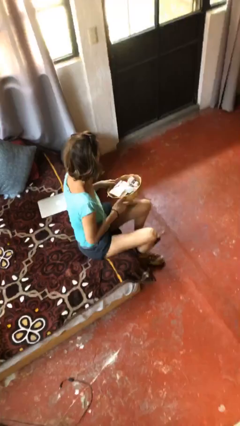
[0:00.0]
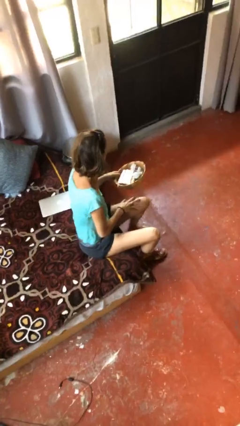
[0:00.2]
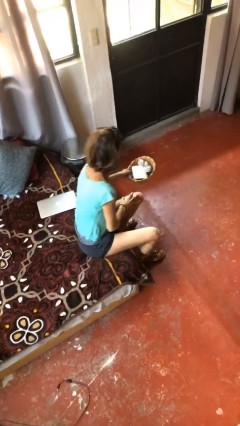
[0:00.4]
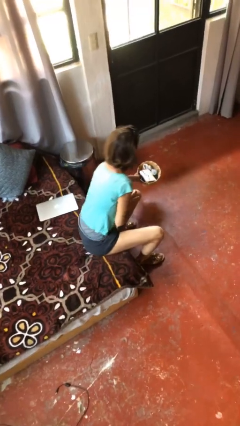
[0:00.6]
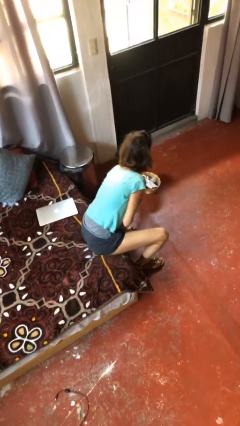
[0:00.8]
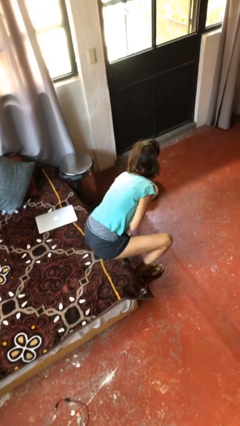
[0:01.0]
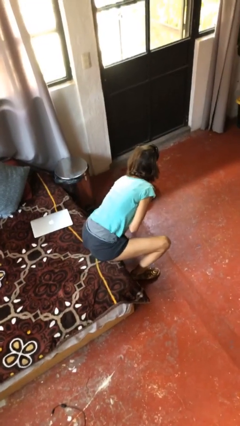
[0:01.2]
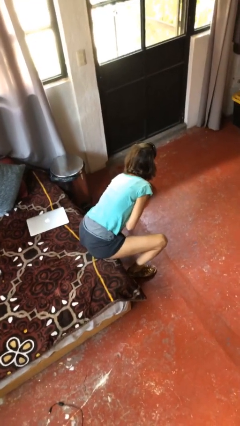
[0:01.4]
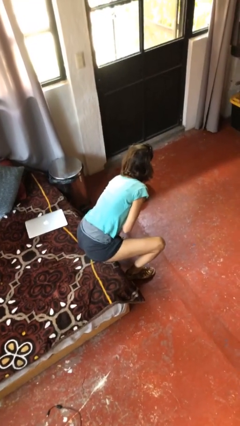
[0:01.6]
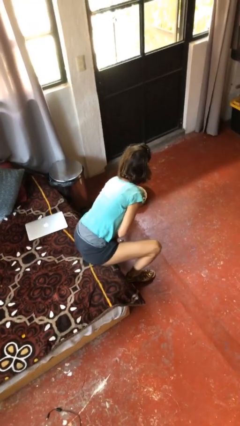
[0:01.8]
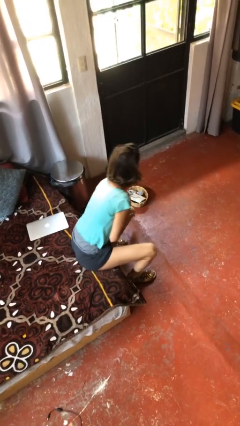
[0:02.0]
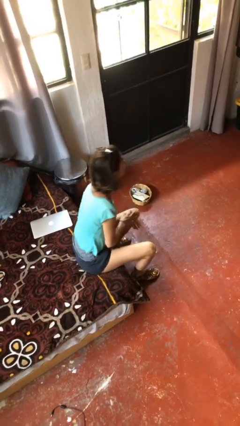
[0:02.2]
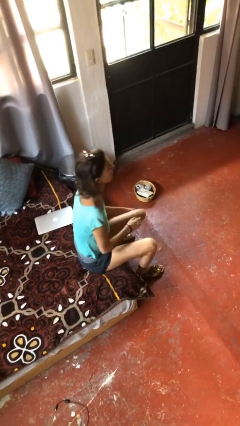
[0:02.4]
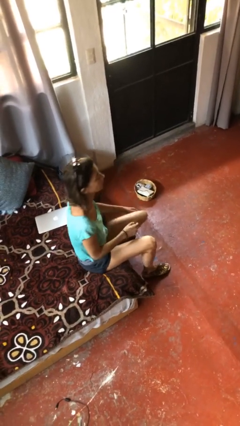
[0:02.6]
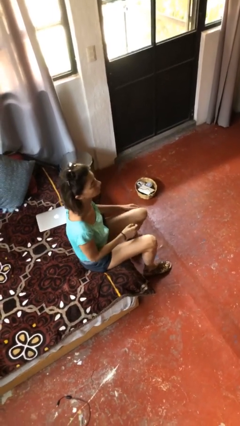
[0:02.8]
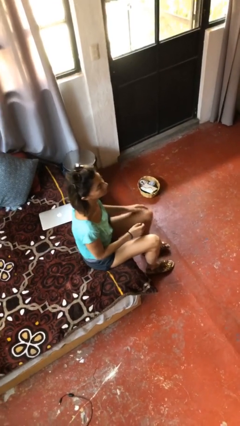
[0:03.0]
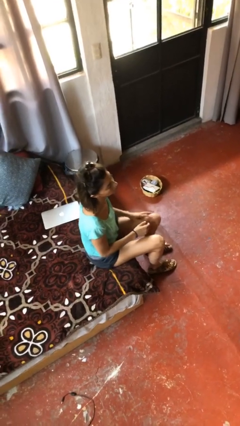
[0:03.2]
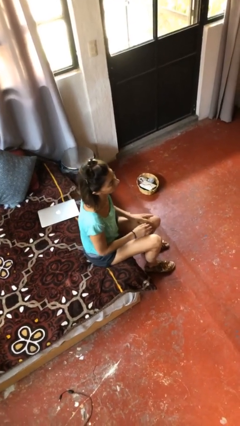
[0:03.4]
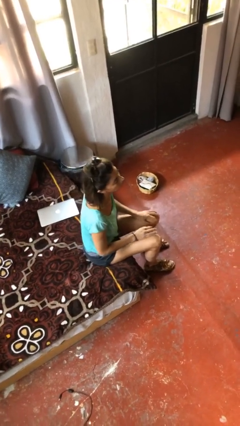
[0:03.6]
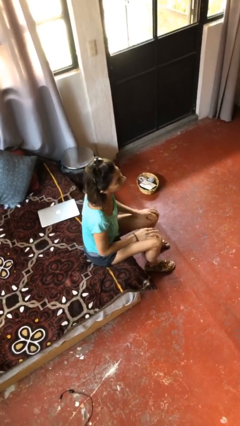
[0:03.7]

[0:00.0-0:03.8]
person puts down object on floor

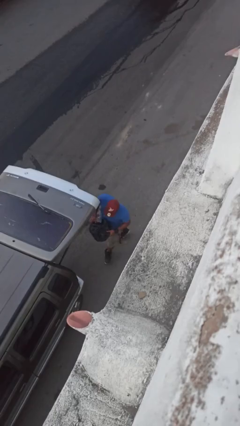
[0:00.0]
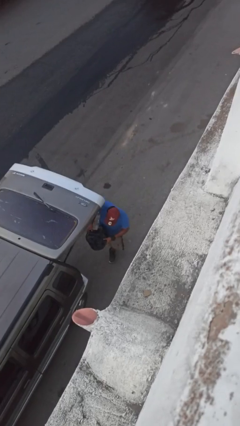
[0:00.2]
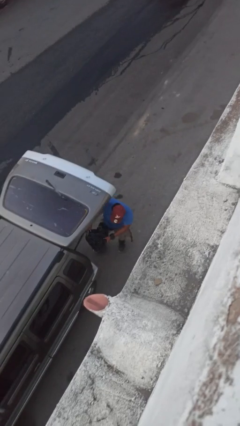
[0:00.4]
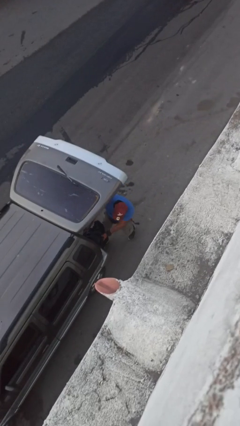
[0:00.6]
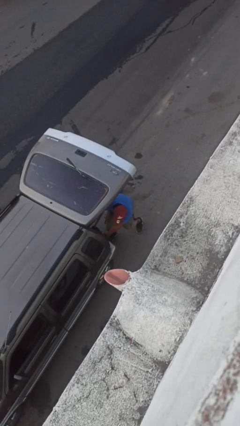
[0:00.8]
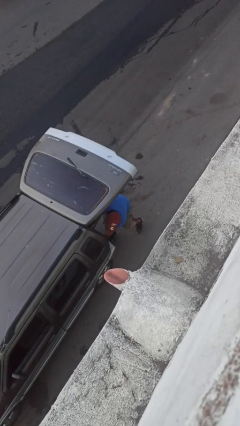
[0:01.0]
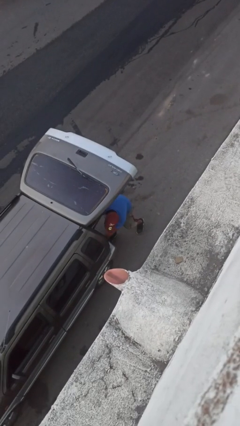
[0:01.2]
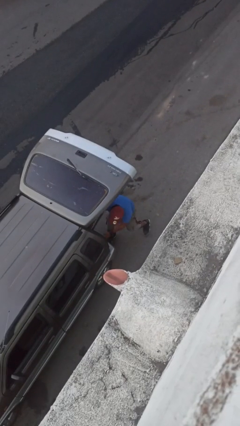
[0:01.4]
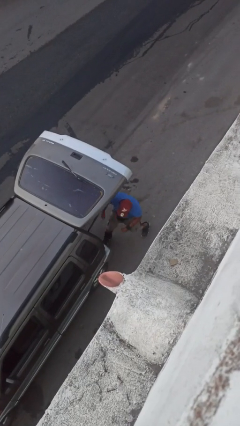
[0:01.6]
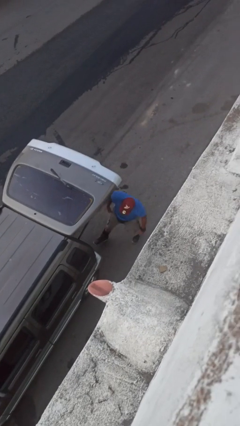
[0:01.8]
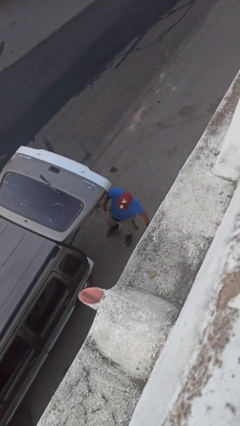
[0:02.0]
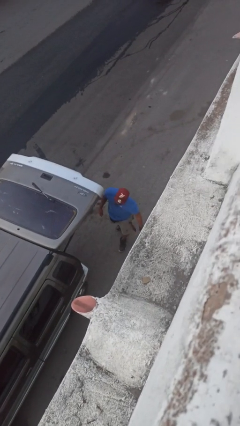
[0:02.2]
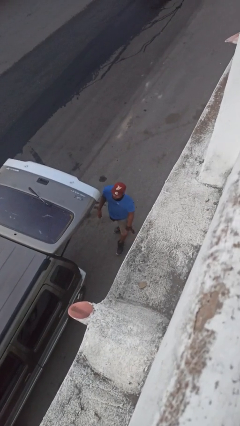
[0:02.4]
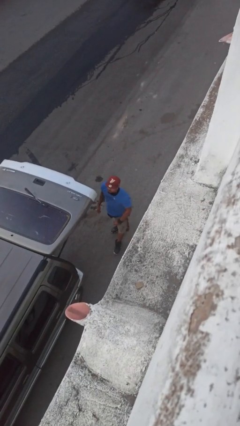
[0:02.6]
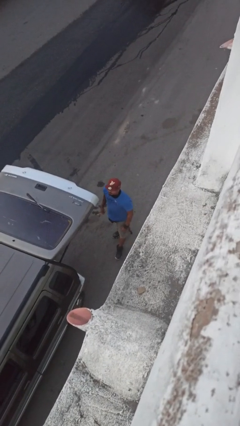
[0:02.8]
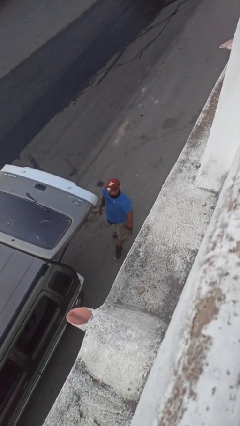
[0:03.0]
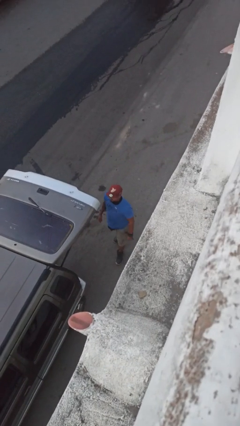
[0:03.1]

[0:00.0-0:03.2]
person loads car

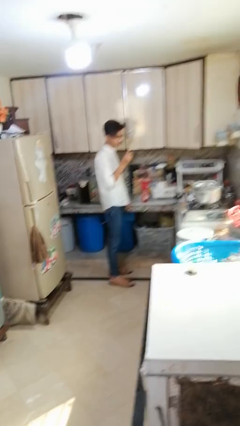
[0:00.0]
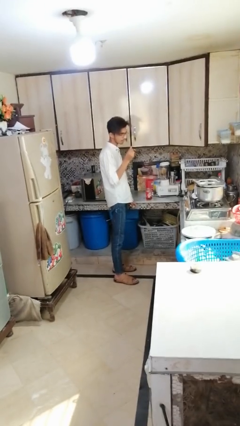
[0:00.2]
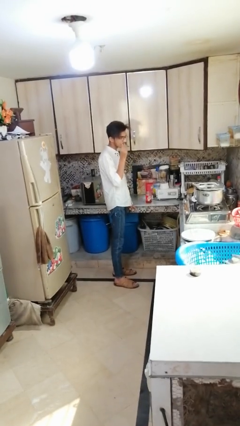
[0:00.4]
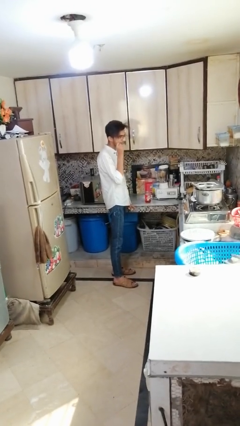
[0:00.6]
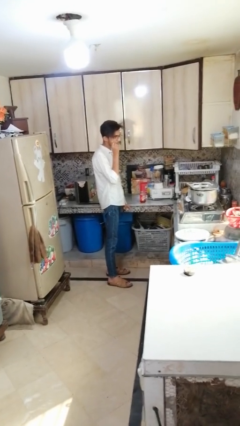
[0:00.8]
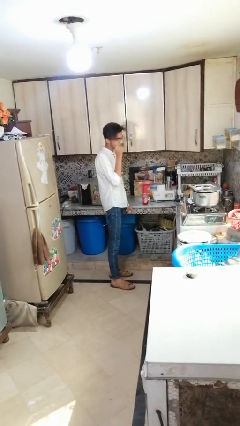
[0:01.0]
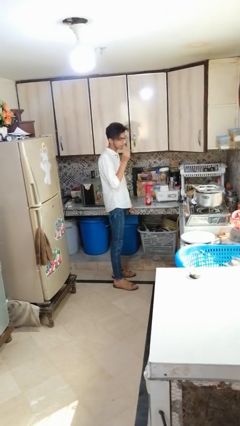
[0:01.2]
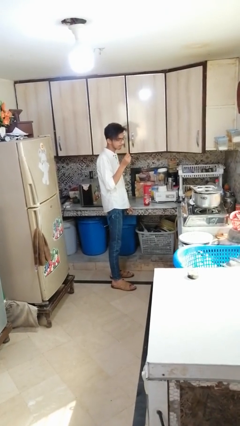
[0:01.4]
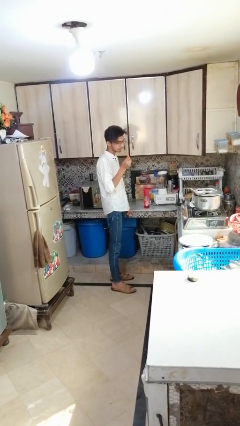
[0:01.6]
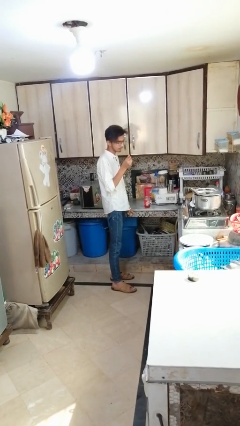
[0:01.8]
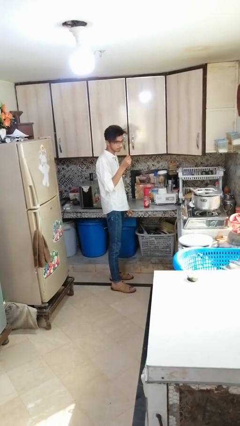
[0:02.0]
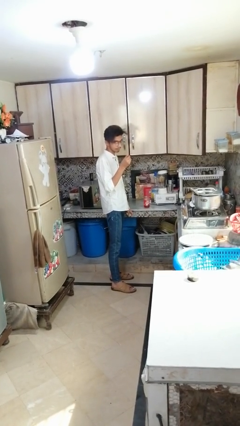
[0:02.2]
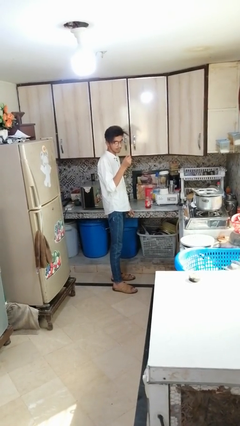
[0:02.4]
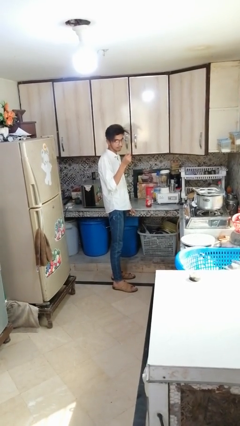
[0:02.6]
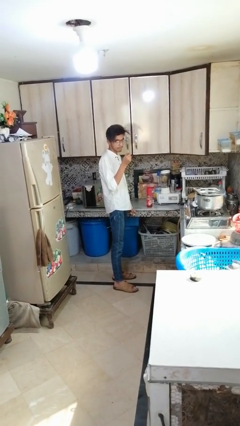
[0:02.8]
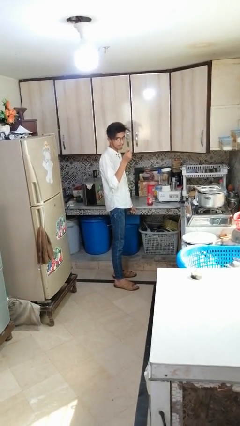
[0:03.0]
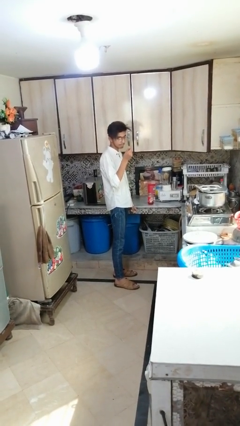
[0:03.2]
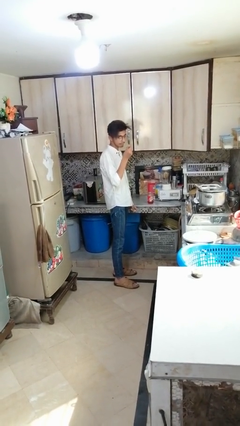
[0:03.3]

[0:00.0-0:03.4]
person eats with utensil

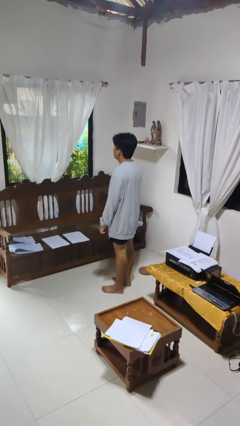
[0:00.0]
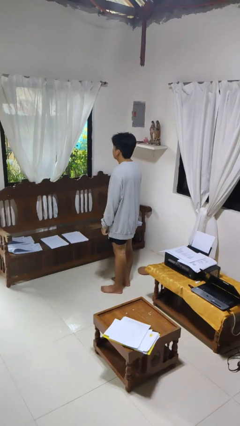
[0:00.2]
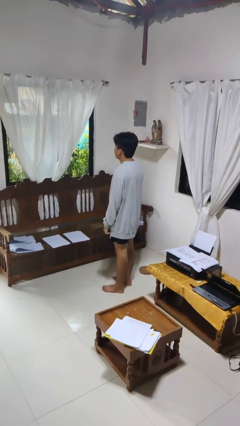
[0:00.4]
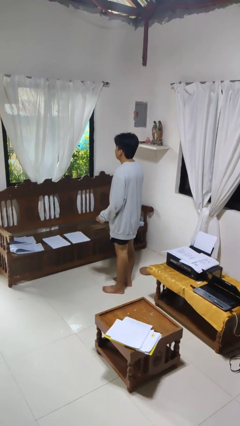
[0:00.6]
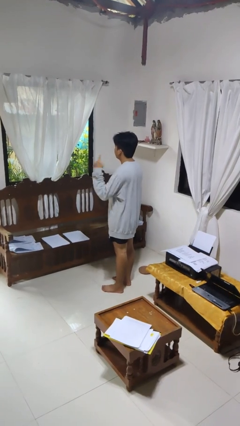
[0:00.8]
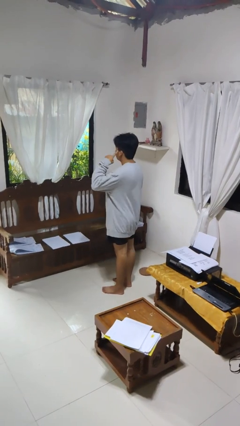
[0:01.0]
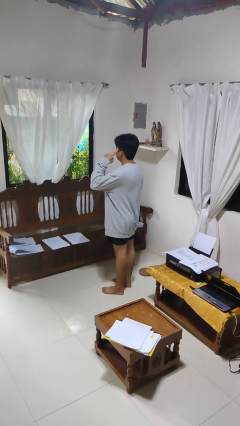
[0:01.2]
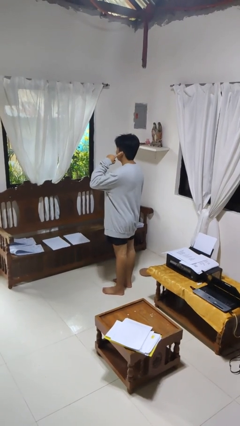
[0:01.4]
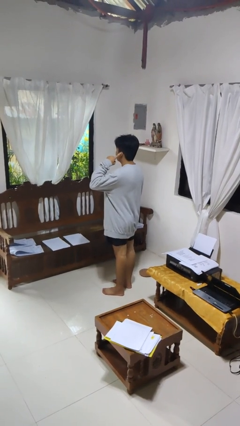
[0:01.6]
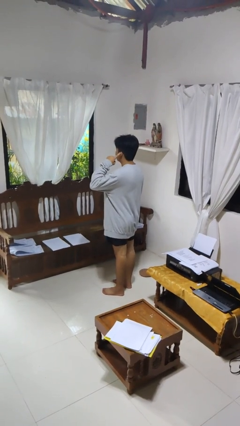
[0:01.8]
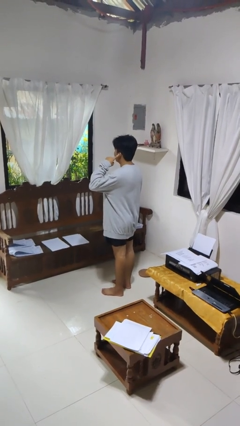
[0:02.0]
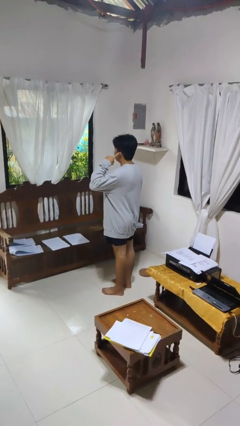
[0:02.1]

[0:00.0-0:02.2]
person gestures listen closely

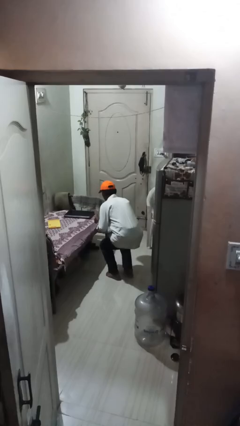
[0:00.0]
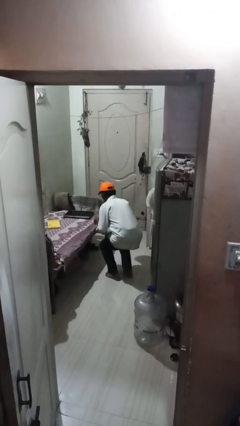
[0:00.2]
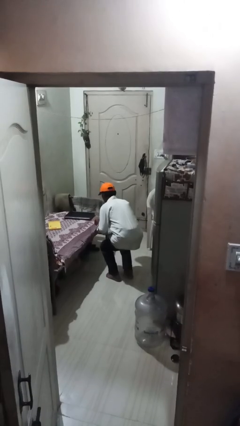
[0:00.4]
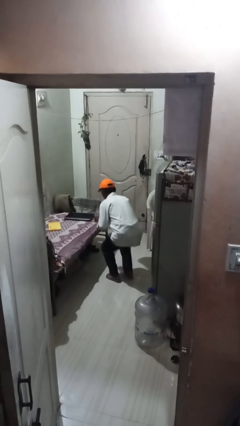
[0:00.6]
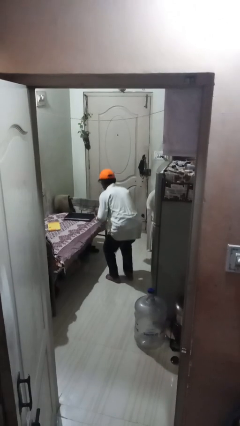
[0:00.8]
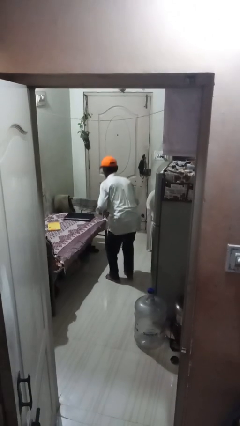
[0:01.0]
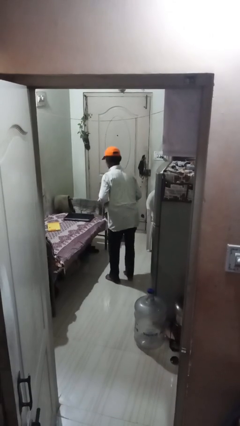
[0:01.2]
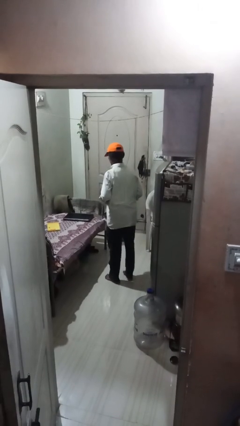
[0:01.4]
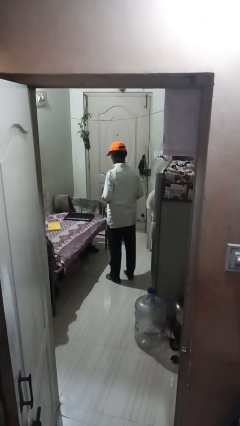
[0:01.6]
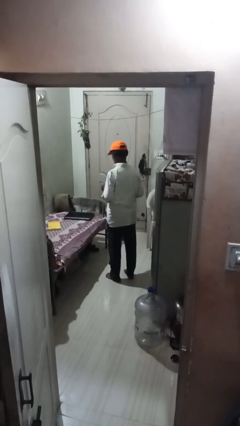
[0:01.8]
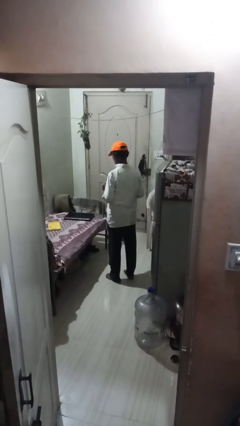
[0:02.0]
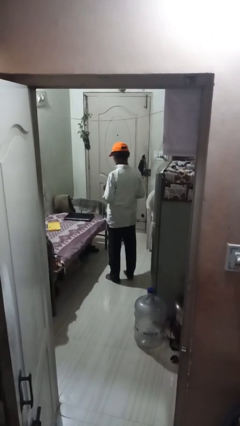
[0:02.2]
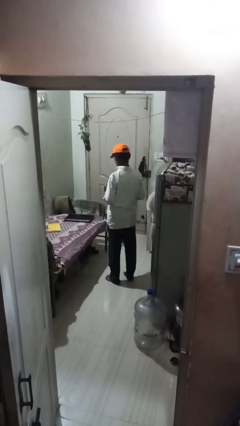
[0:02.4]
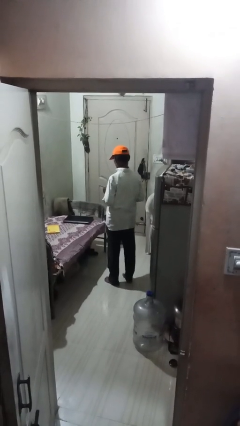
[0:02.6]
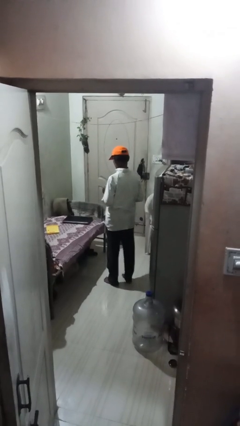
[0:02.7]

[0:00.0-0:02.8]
person stands up

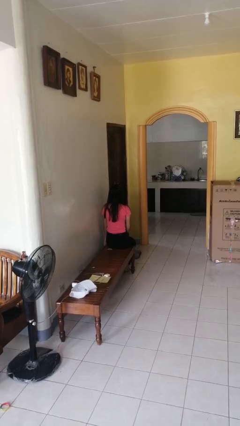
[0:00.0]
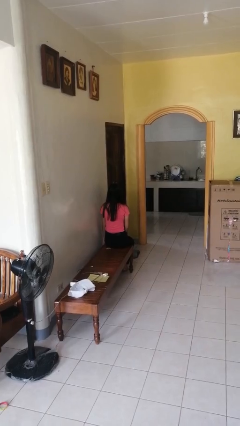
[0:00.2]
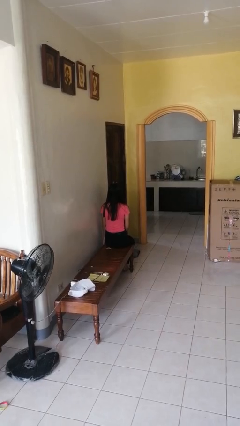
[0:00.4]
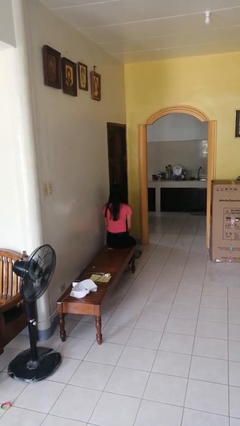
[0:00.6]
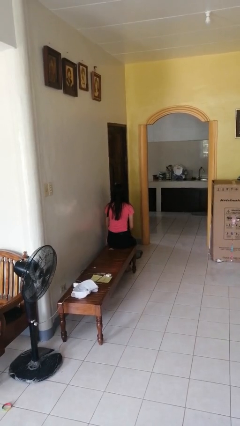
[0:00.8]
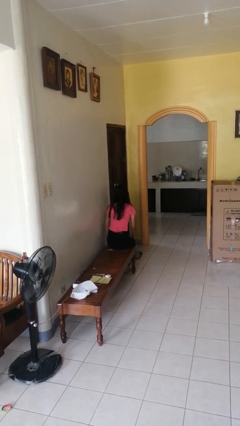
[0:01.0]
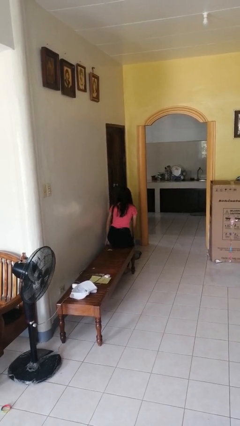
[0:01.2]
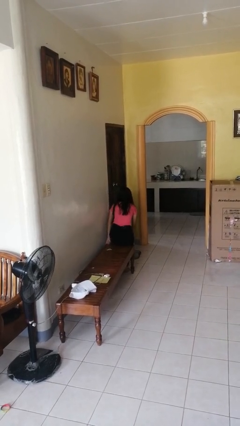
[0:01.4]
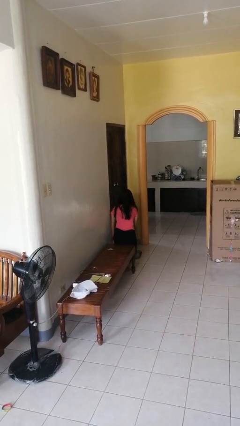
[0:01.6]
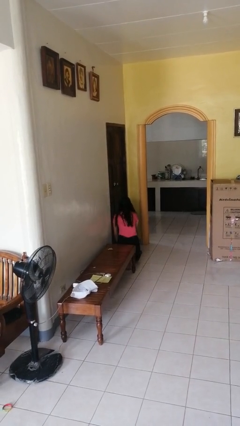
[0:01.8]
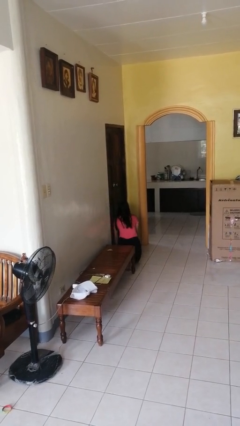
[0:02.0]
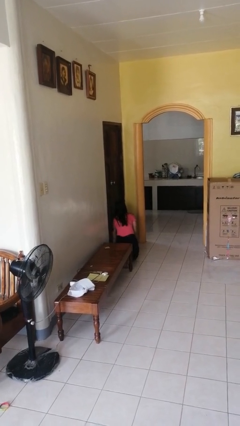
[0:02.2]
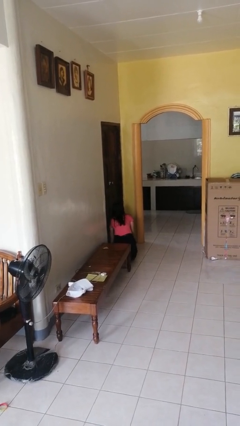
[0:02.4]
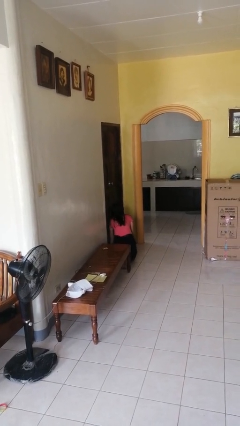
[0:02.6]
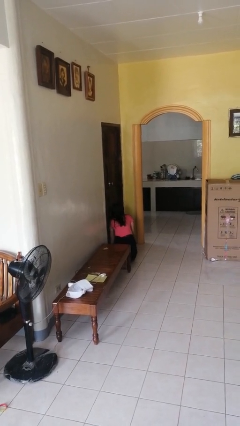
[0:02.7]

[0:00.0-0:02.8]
person falls from chair
